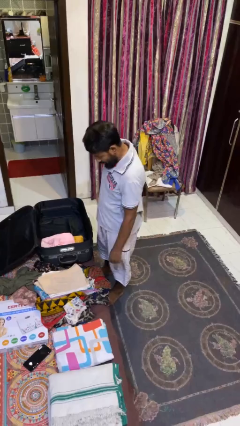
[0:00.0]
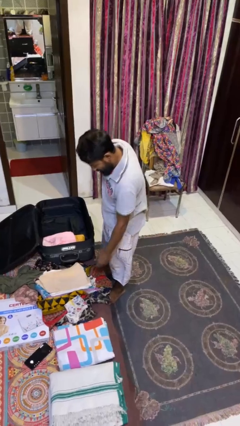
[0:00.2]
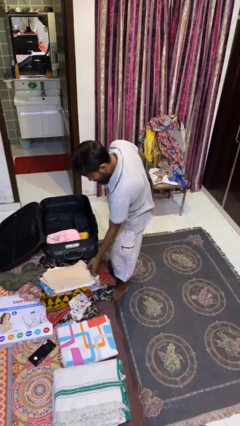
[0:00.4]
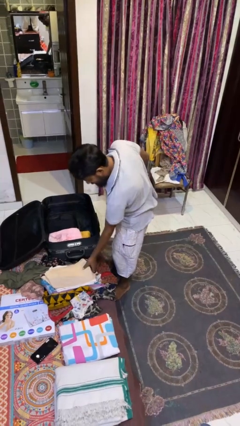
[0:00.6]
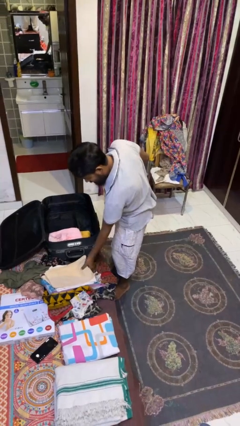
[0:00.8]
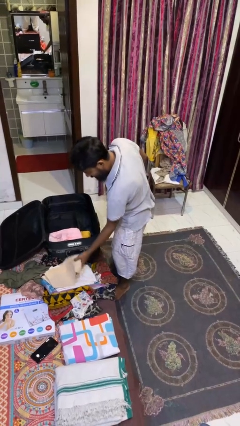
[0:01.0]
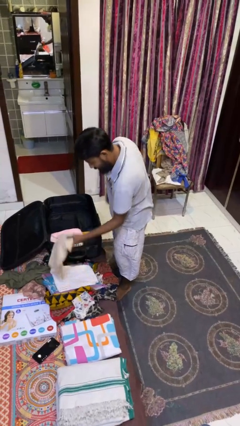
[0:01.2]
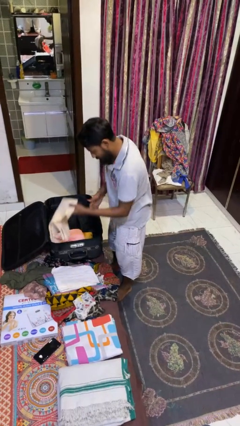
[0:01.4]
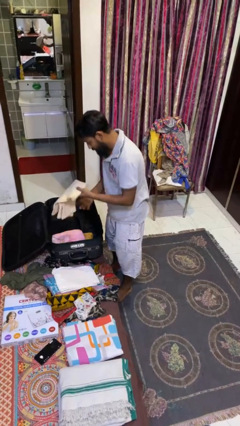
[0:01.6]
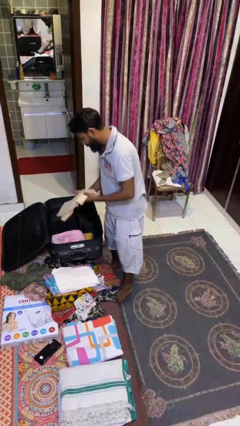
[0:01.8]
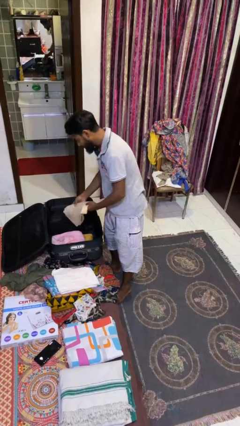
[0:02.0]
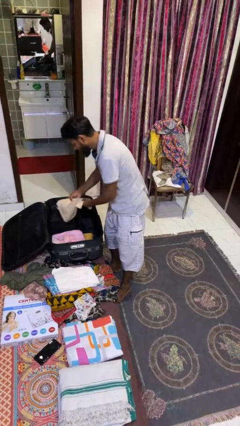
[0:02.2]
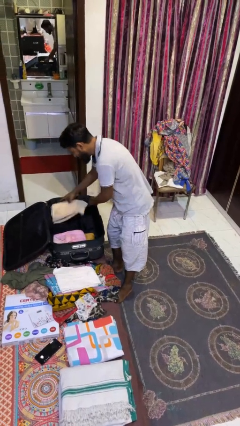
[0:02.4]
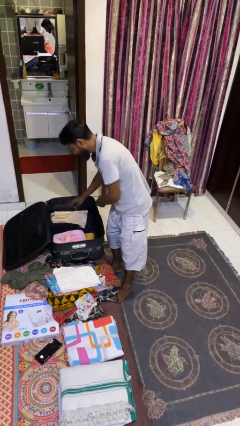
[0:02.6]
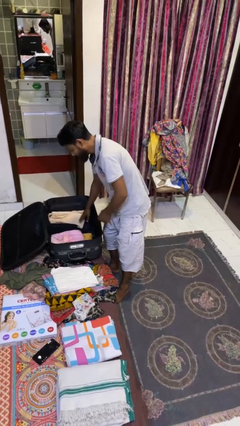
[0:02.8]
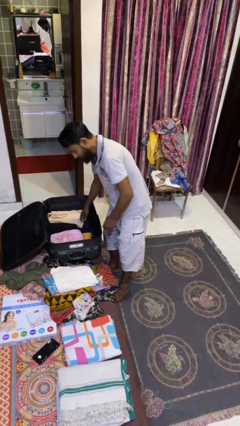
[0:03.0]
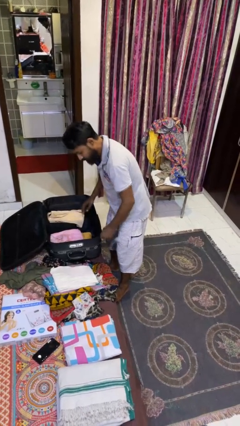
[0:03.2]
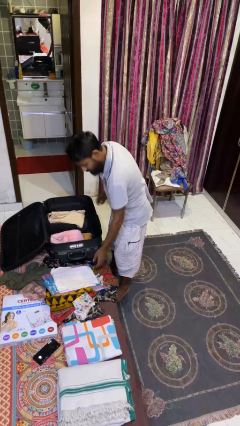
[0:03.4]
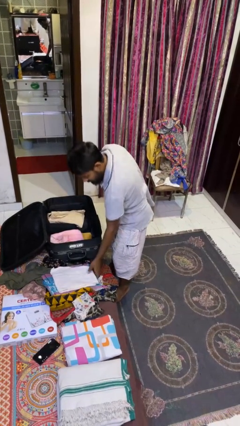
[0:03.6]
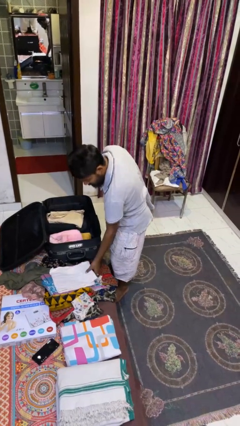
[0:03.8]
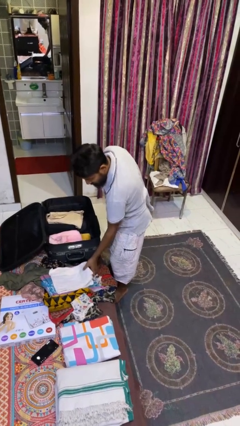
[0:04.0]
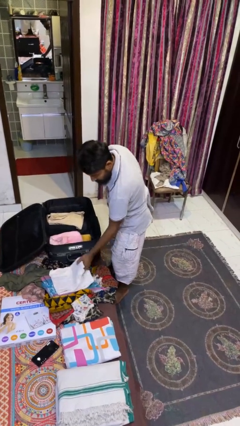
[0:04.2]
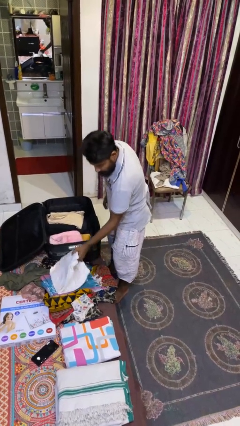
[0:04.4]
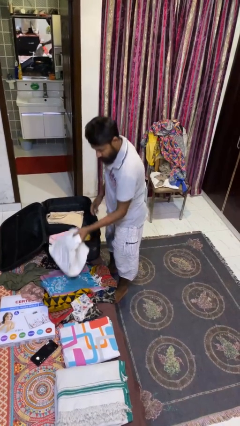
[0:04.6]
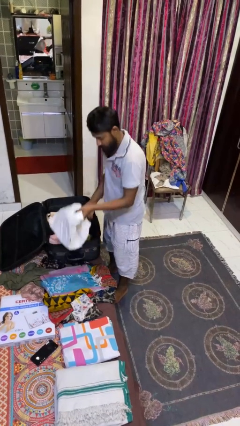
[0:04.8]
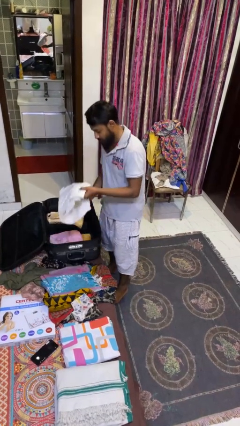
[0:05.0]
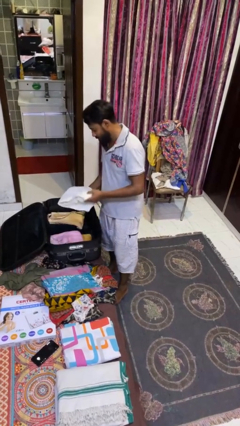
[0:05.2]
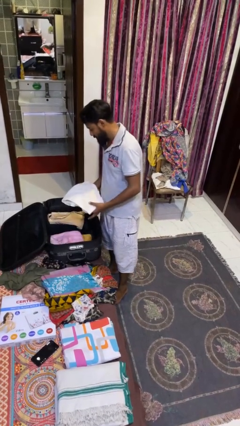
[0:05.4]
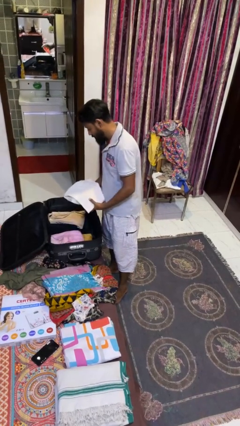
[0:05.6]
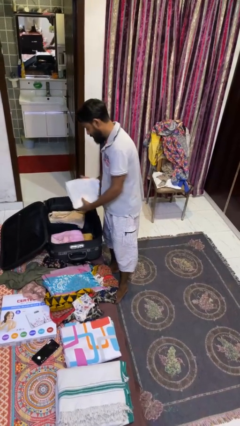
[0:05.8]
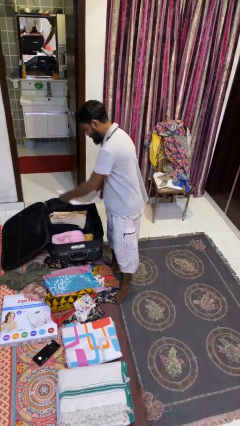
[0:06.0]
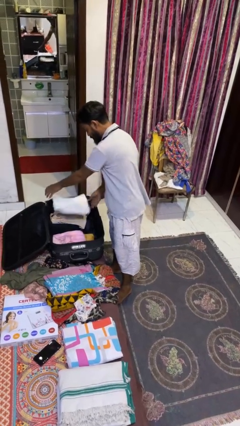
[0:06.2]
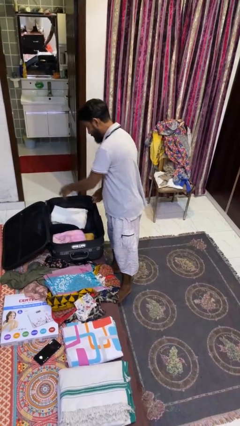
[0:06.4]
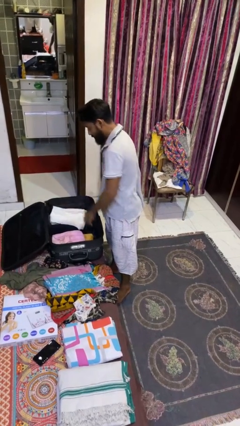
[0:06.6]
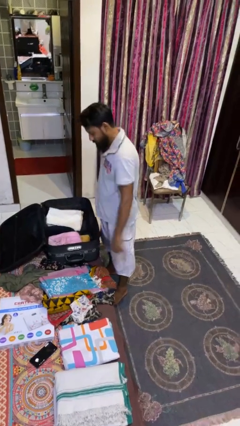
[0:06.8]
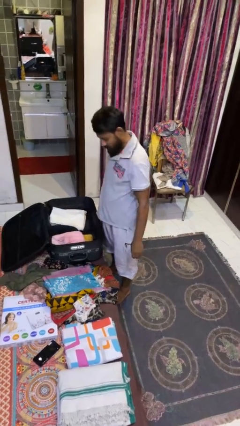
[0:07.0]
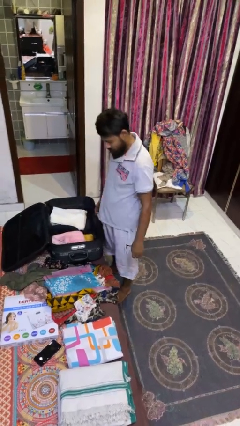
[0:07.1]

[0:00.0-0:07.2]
person loads clothes into suitcase

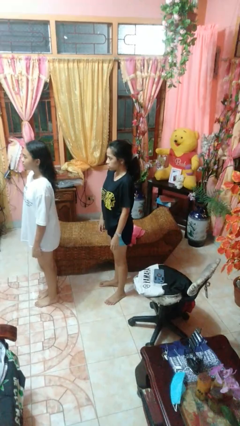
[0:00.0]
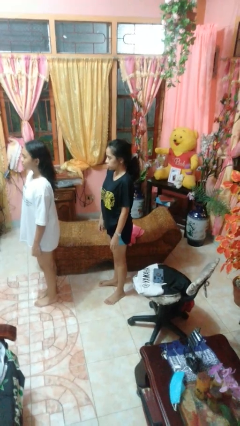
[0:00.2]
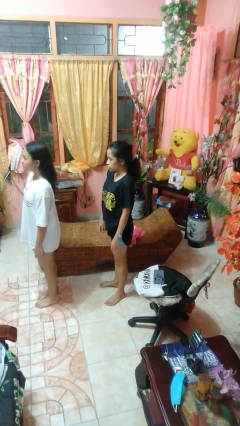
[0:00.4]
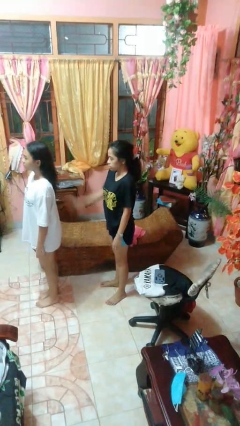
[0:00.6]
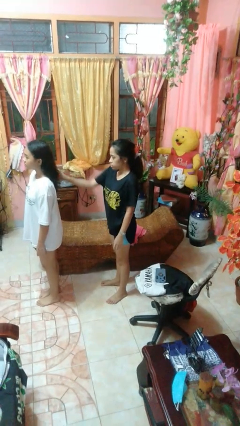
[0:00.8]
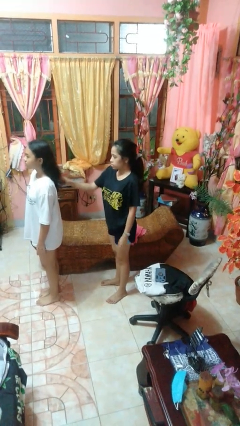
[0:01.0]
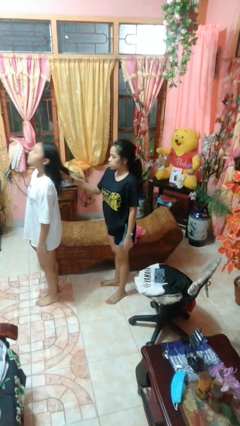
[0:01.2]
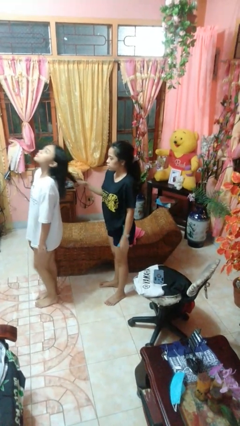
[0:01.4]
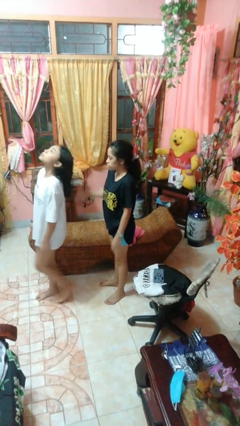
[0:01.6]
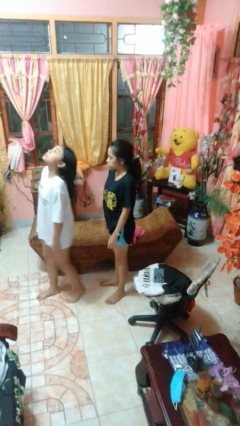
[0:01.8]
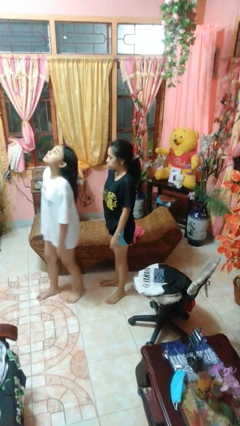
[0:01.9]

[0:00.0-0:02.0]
person grabs person by hair

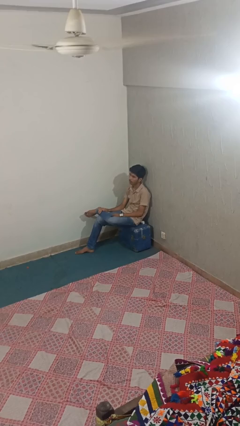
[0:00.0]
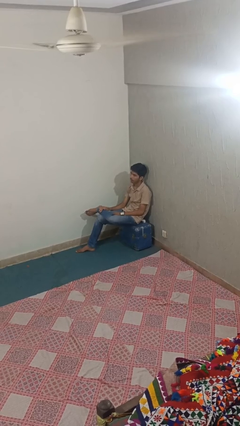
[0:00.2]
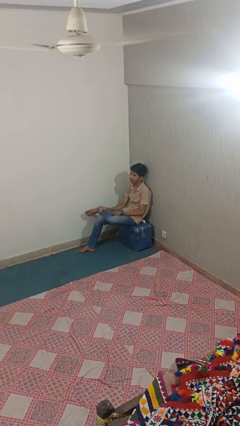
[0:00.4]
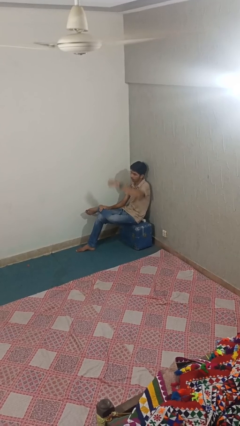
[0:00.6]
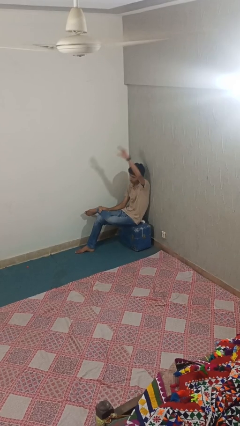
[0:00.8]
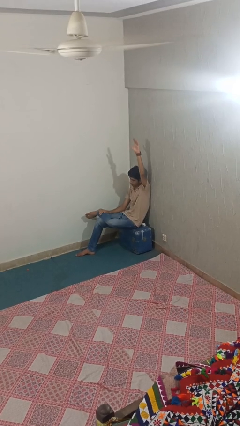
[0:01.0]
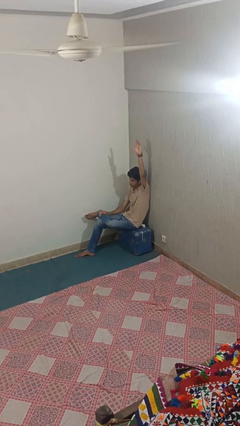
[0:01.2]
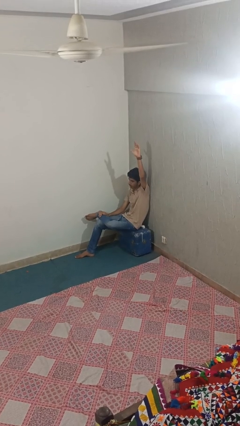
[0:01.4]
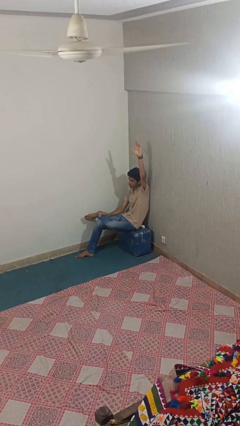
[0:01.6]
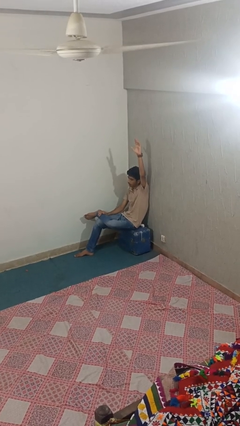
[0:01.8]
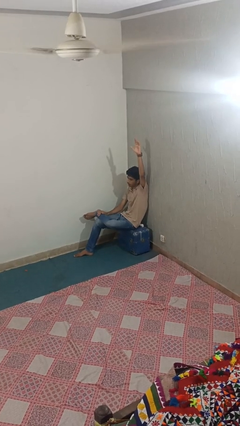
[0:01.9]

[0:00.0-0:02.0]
person gestures raise hand

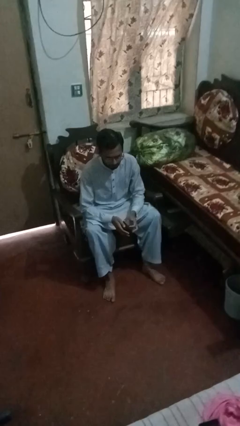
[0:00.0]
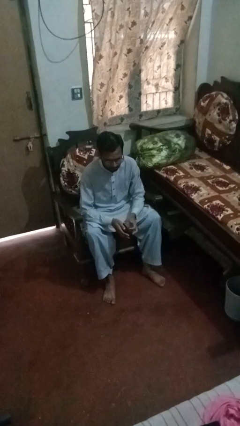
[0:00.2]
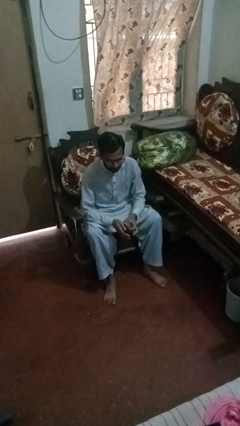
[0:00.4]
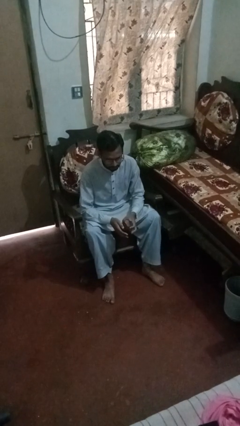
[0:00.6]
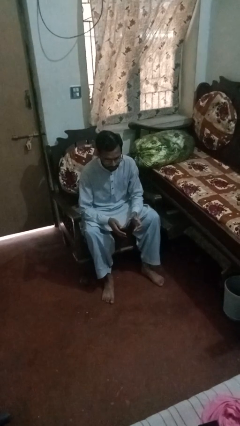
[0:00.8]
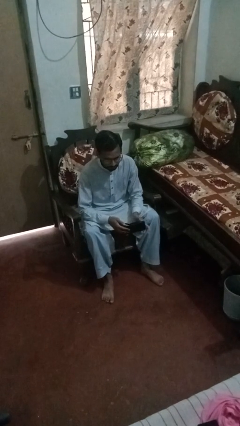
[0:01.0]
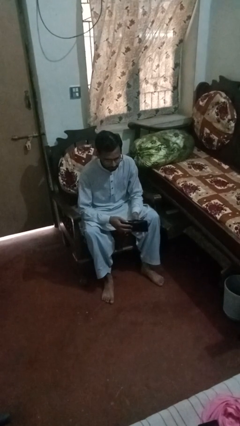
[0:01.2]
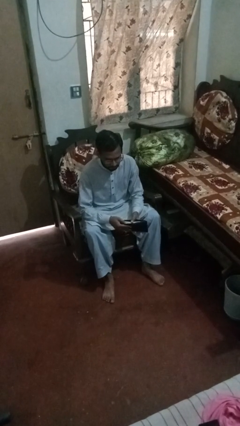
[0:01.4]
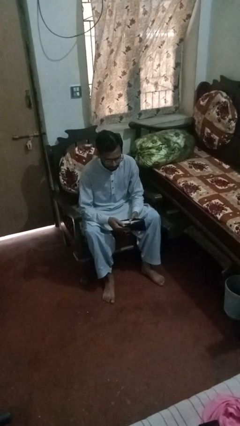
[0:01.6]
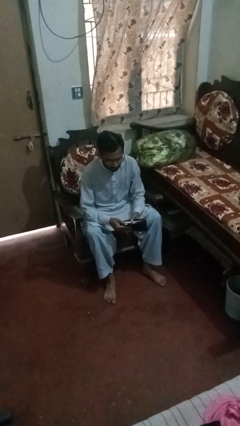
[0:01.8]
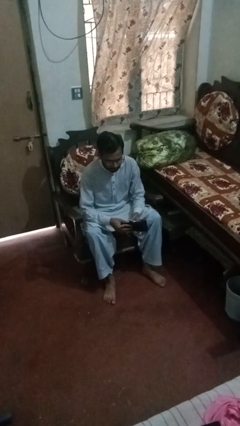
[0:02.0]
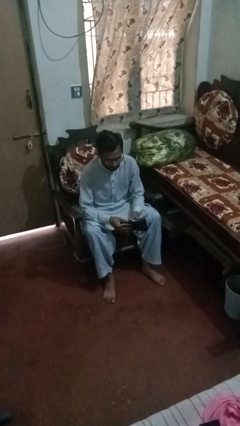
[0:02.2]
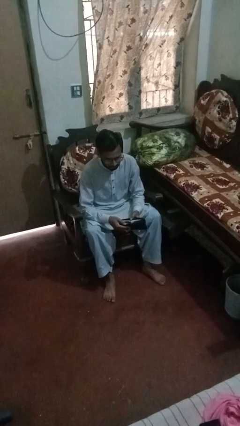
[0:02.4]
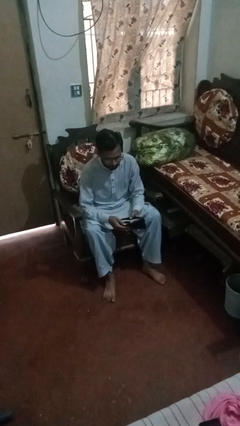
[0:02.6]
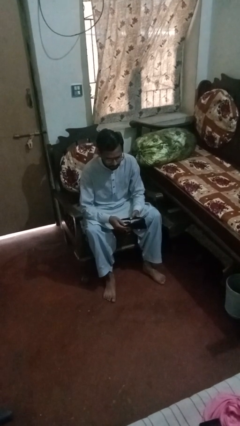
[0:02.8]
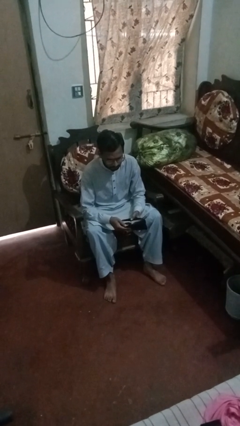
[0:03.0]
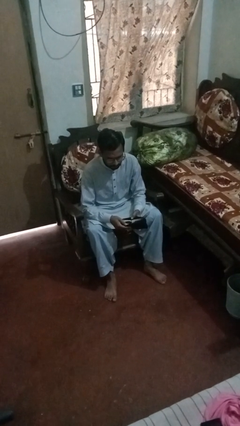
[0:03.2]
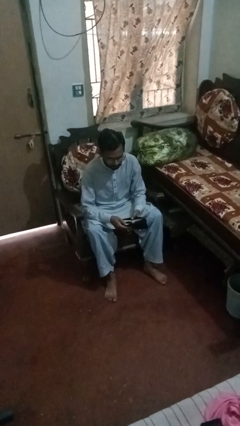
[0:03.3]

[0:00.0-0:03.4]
person searches in purse

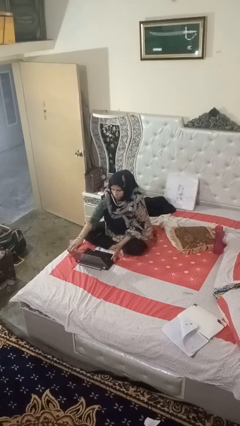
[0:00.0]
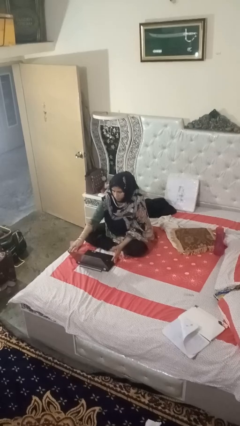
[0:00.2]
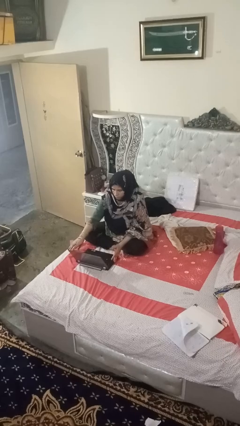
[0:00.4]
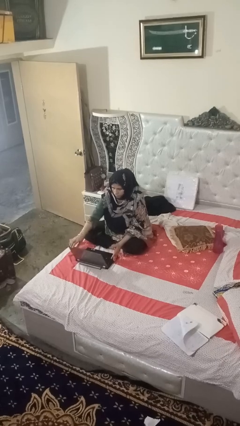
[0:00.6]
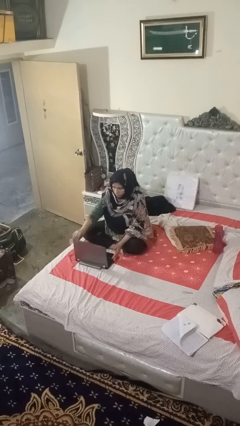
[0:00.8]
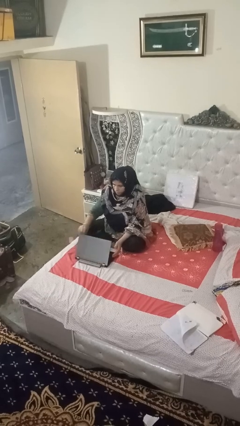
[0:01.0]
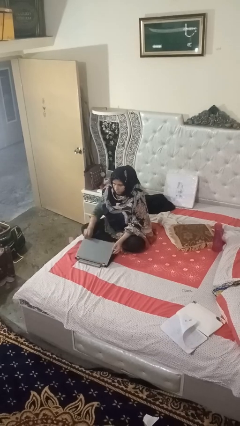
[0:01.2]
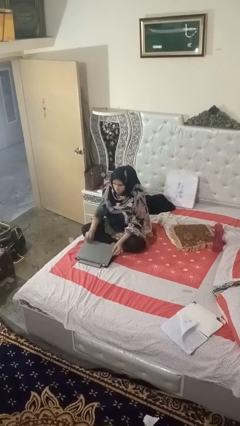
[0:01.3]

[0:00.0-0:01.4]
person closes laptop

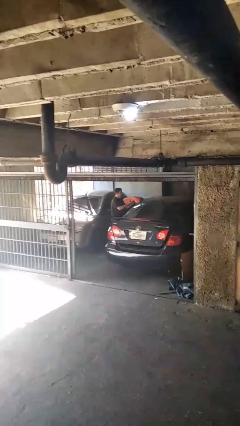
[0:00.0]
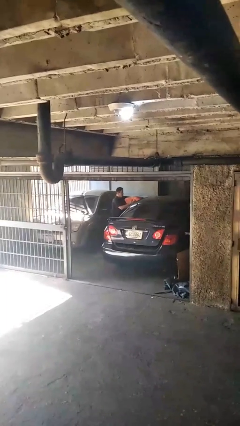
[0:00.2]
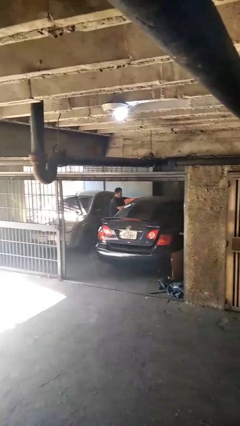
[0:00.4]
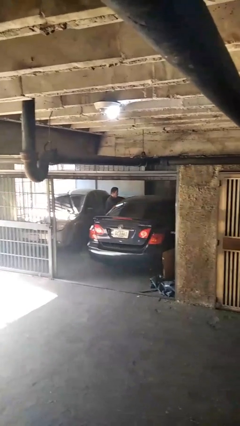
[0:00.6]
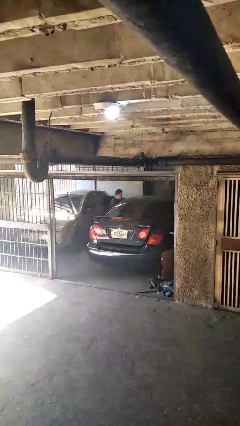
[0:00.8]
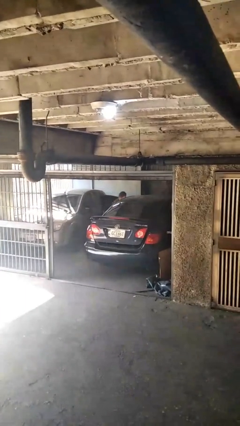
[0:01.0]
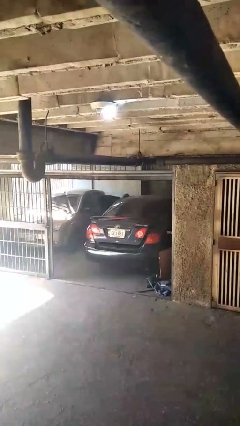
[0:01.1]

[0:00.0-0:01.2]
person loads car

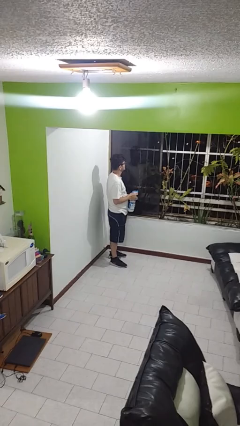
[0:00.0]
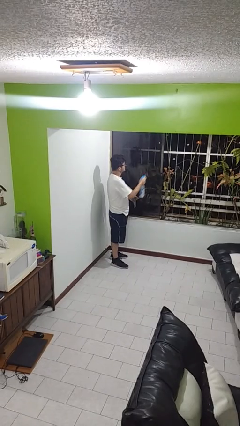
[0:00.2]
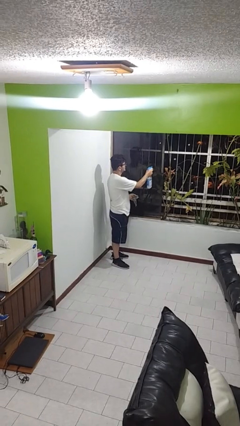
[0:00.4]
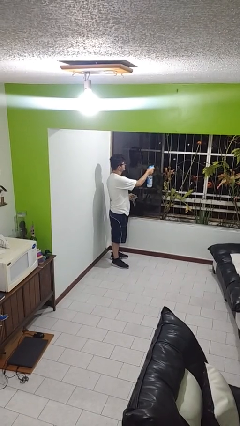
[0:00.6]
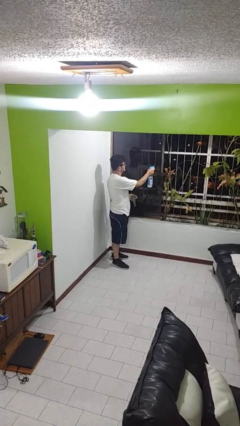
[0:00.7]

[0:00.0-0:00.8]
person sprays from bottle
